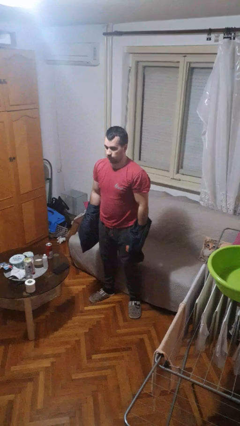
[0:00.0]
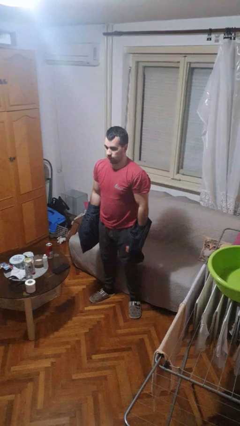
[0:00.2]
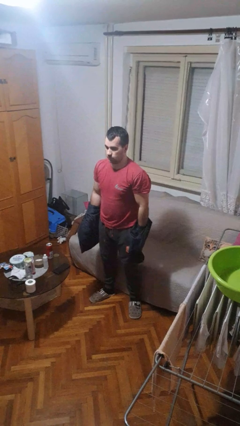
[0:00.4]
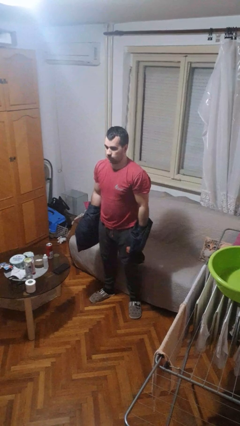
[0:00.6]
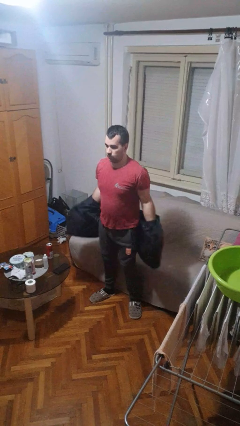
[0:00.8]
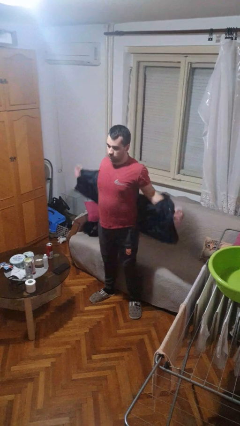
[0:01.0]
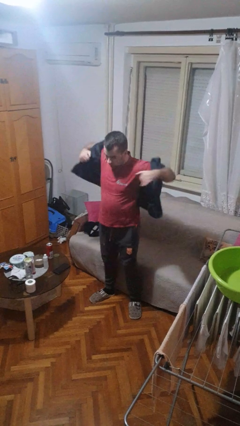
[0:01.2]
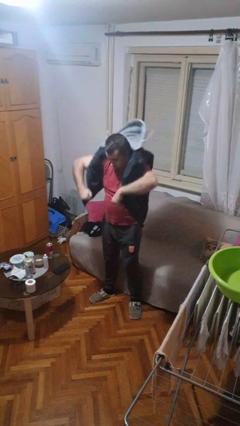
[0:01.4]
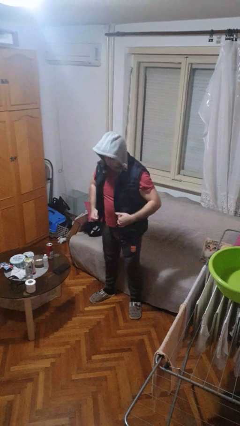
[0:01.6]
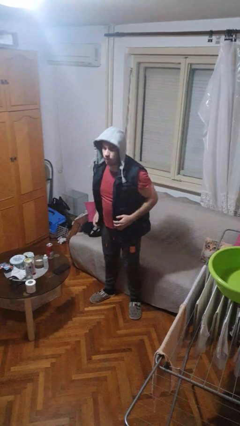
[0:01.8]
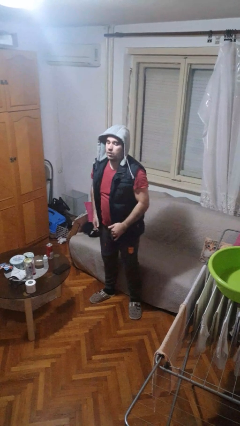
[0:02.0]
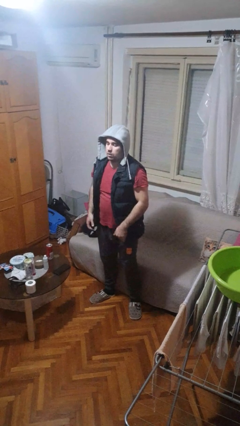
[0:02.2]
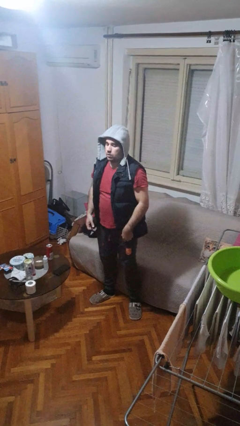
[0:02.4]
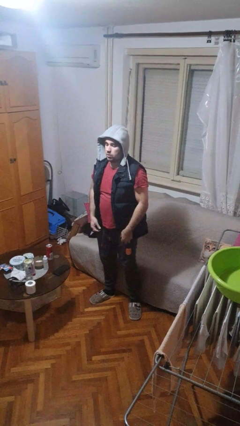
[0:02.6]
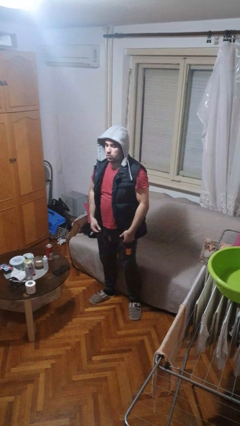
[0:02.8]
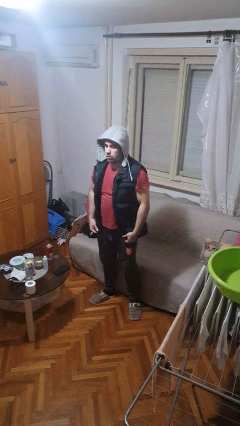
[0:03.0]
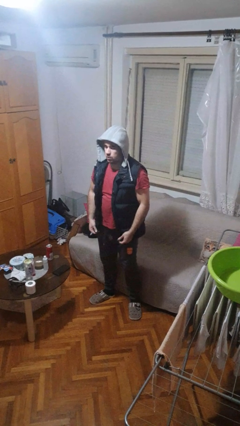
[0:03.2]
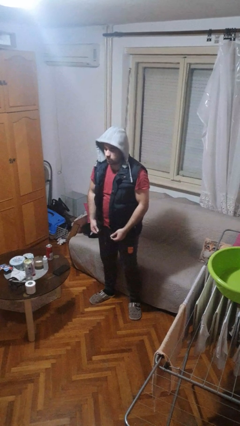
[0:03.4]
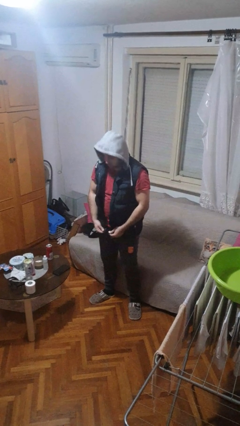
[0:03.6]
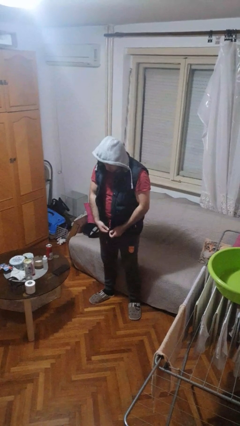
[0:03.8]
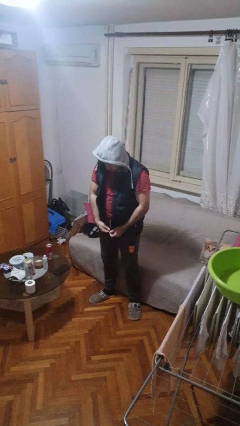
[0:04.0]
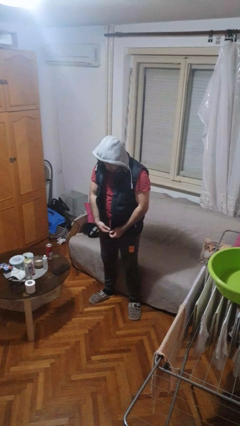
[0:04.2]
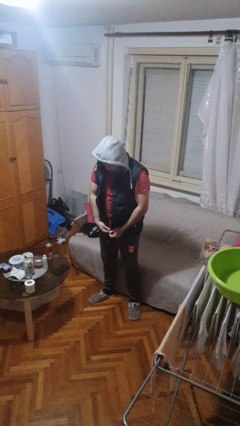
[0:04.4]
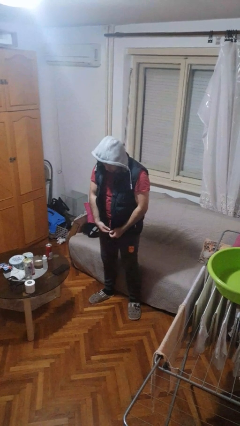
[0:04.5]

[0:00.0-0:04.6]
person puts on jacket

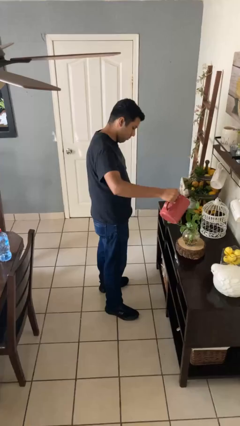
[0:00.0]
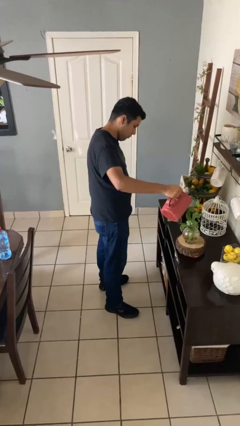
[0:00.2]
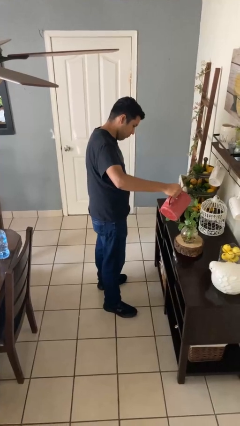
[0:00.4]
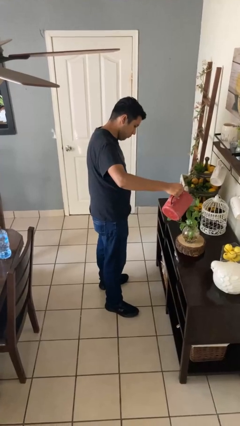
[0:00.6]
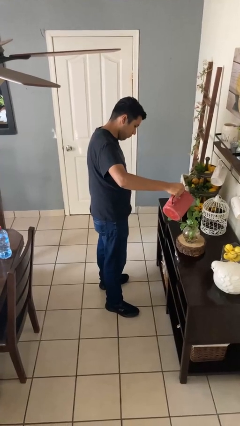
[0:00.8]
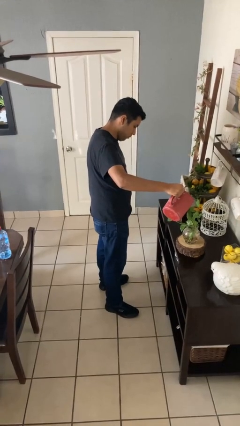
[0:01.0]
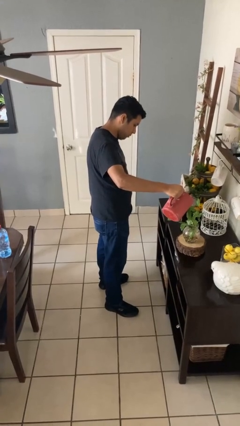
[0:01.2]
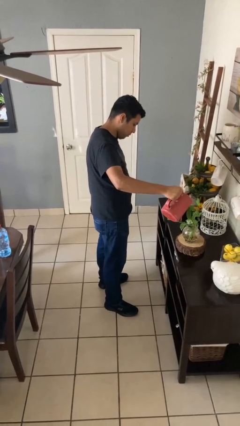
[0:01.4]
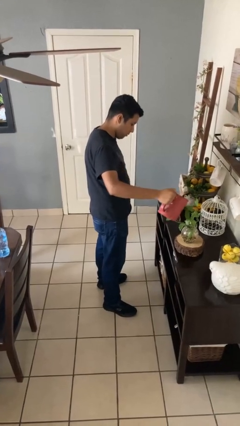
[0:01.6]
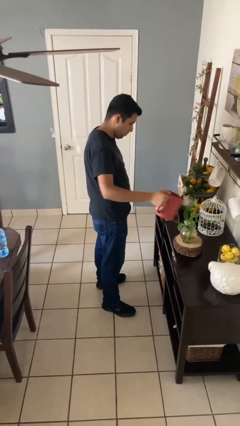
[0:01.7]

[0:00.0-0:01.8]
person waters houseplant

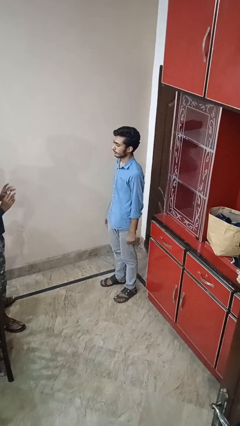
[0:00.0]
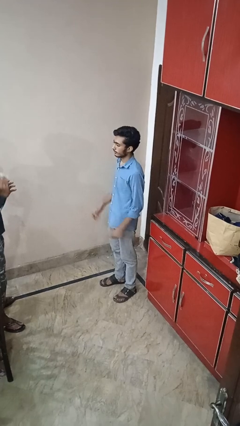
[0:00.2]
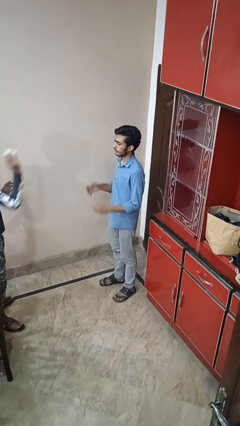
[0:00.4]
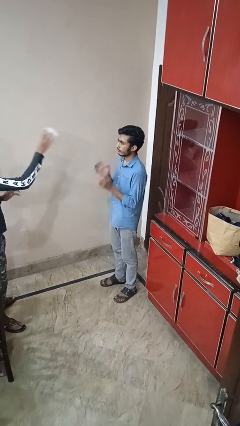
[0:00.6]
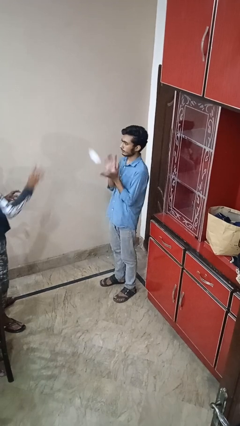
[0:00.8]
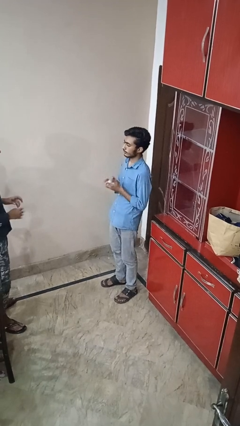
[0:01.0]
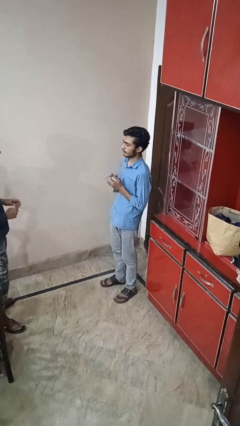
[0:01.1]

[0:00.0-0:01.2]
person catches object from person

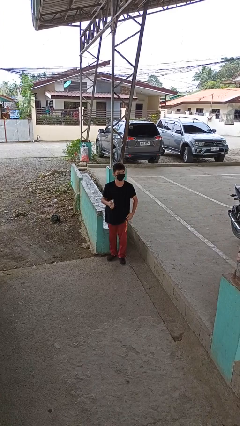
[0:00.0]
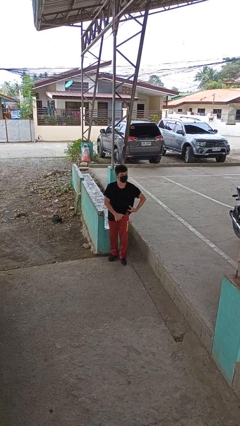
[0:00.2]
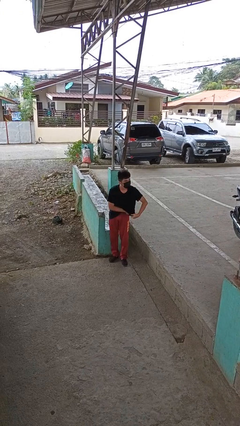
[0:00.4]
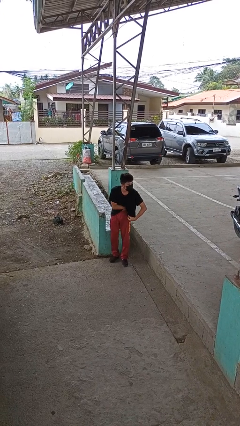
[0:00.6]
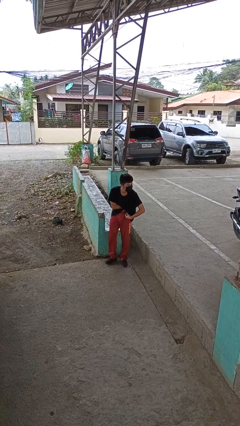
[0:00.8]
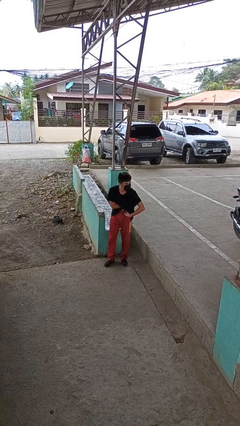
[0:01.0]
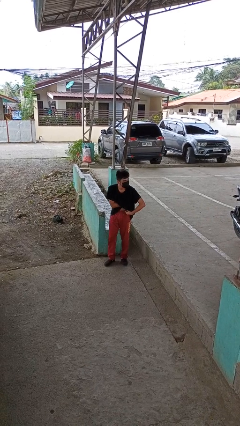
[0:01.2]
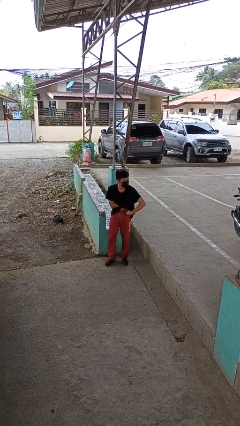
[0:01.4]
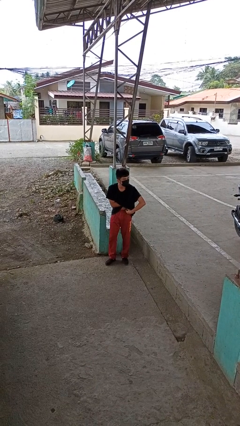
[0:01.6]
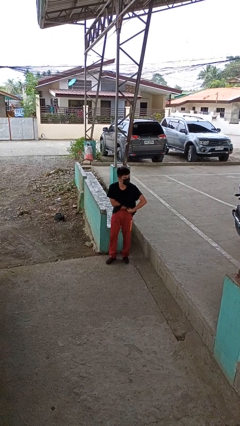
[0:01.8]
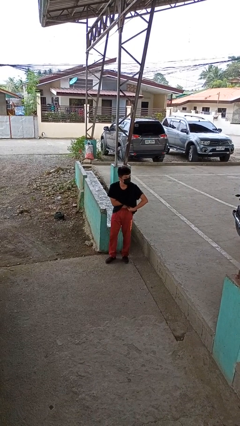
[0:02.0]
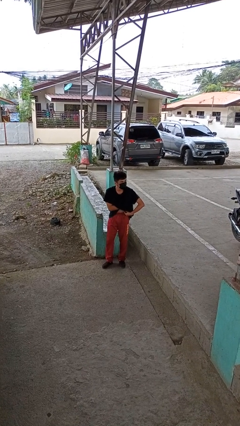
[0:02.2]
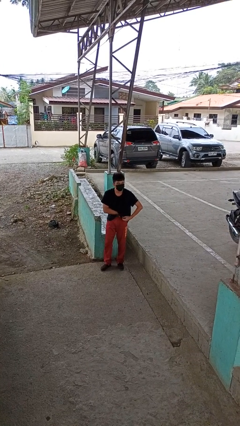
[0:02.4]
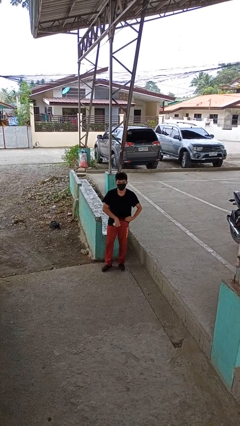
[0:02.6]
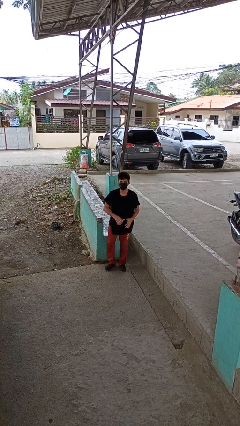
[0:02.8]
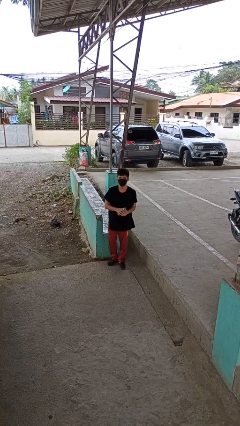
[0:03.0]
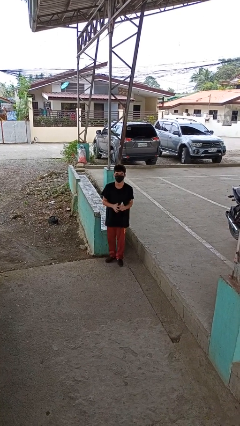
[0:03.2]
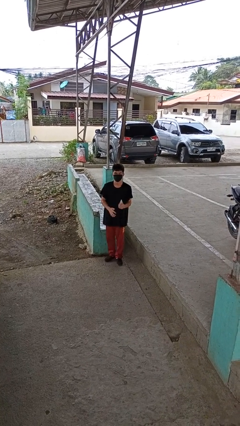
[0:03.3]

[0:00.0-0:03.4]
person applies deodorant

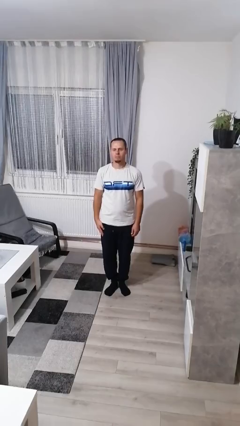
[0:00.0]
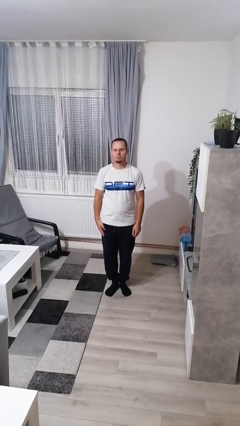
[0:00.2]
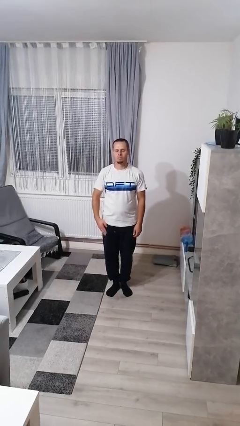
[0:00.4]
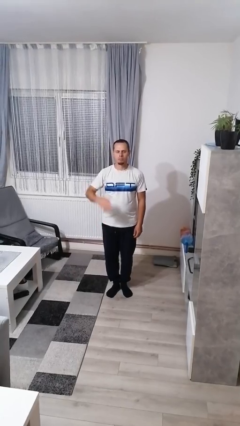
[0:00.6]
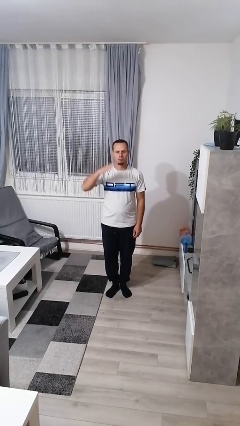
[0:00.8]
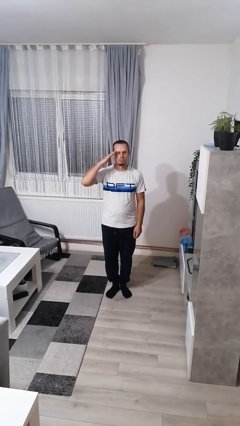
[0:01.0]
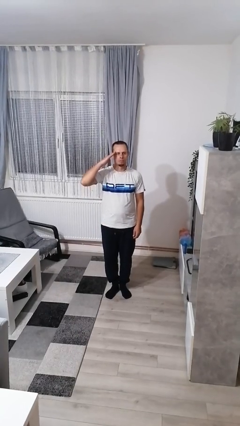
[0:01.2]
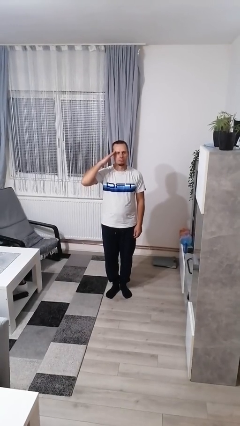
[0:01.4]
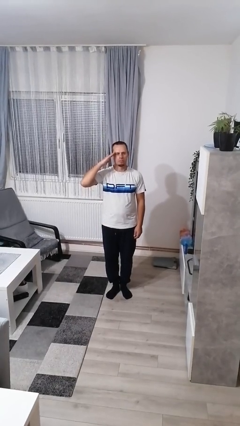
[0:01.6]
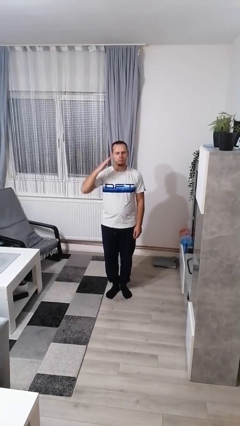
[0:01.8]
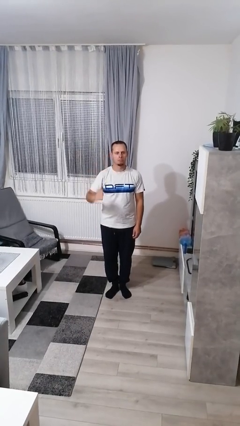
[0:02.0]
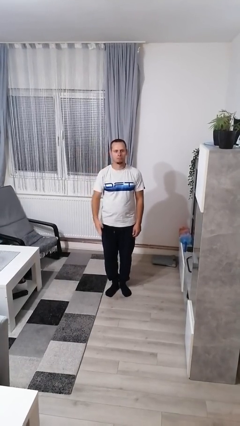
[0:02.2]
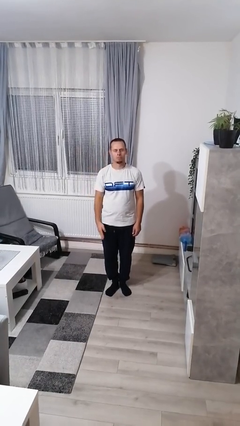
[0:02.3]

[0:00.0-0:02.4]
person salutes

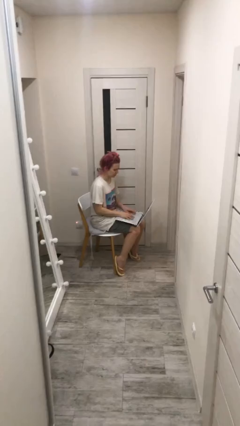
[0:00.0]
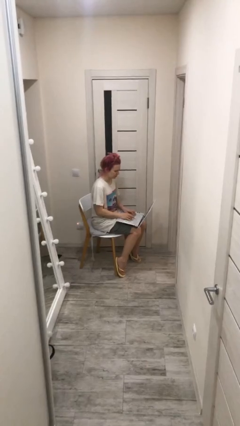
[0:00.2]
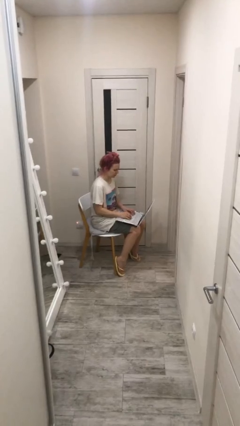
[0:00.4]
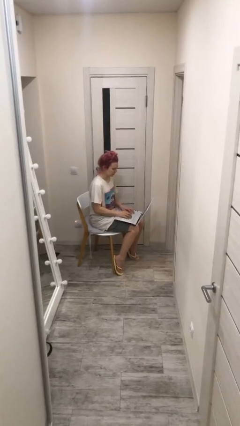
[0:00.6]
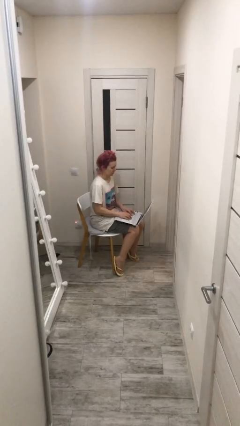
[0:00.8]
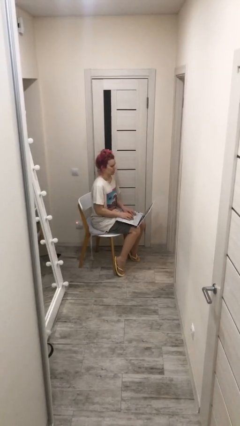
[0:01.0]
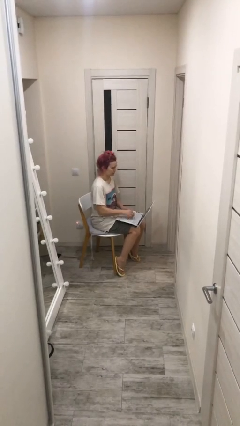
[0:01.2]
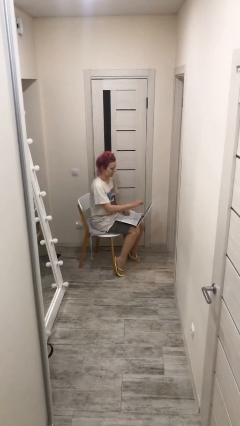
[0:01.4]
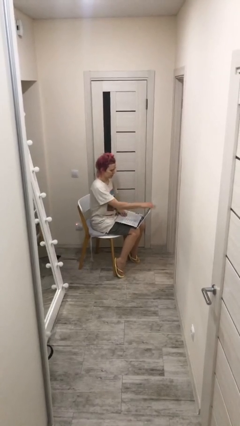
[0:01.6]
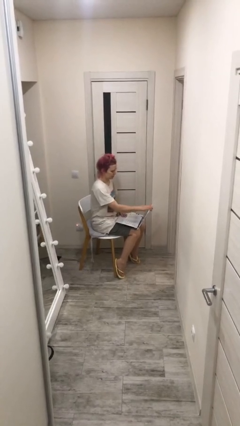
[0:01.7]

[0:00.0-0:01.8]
person interacts with laptop

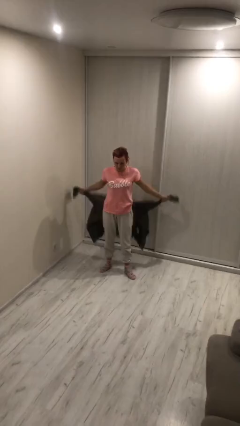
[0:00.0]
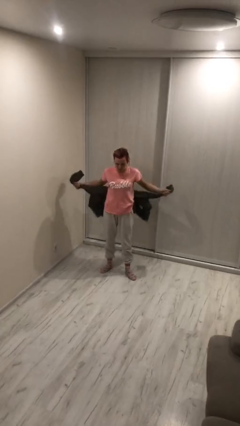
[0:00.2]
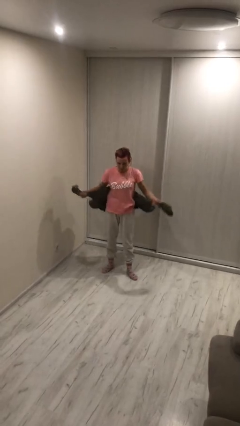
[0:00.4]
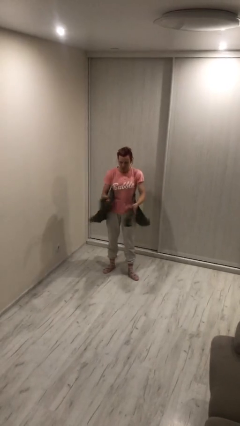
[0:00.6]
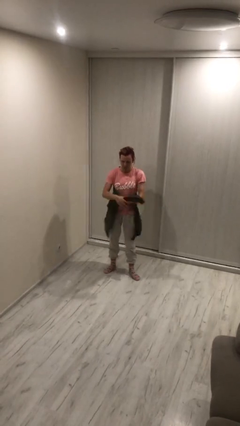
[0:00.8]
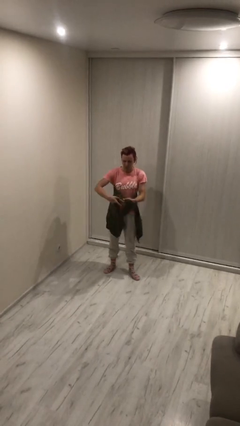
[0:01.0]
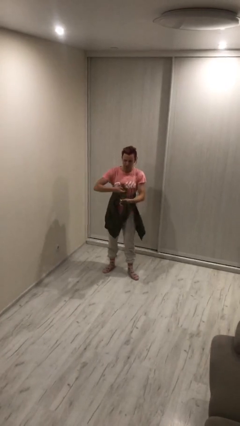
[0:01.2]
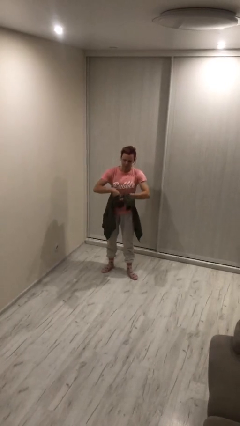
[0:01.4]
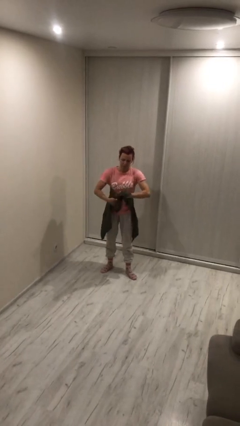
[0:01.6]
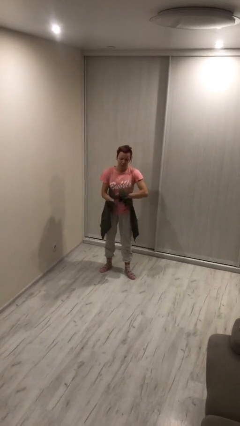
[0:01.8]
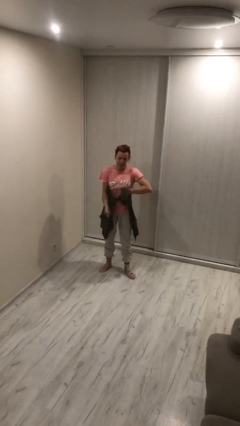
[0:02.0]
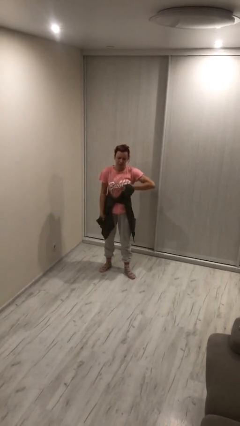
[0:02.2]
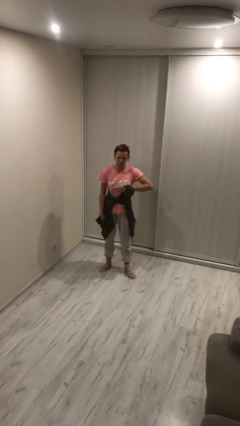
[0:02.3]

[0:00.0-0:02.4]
person ties jacket around waist
